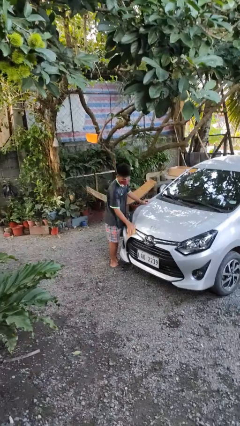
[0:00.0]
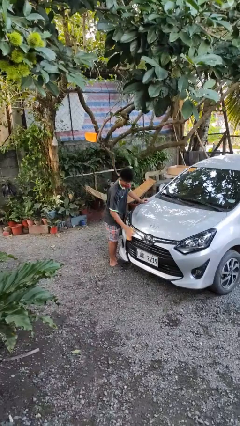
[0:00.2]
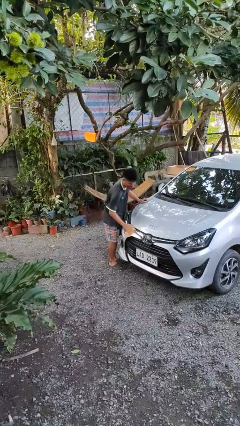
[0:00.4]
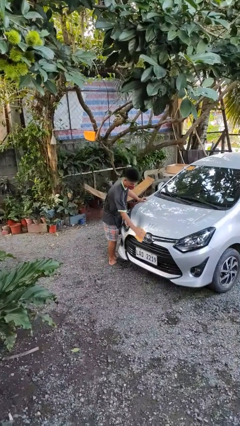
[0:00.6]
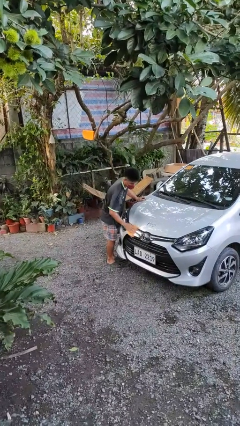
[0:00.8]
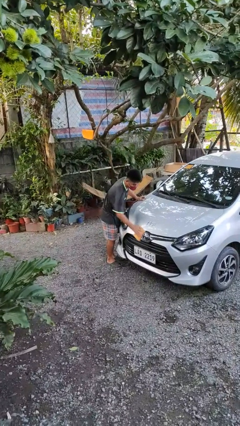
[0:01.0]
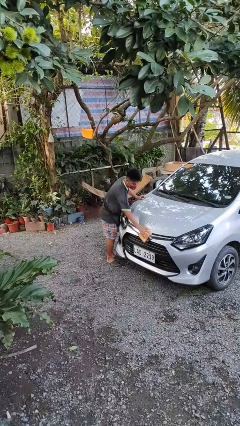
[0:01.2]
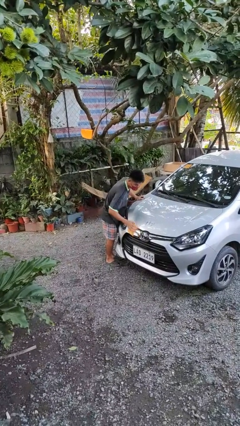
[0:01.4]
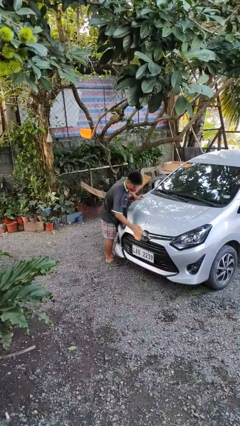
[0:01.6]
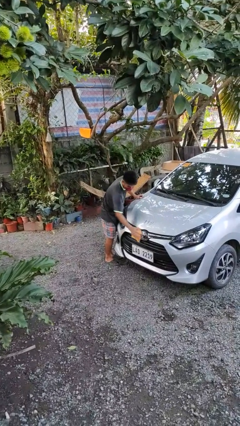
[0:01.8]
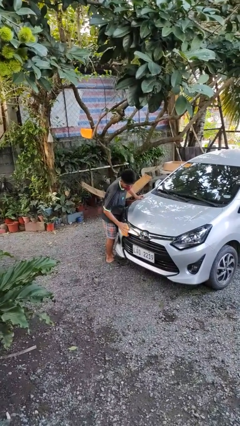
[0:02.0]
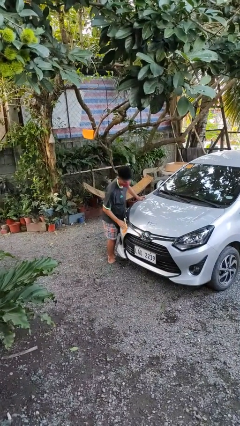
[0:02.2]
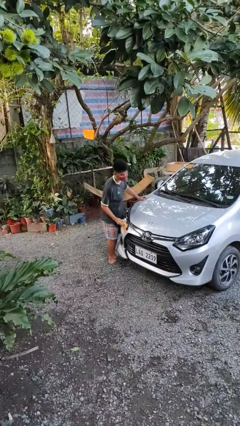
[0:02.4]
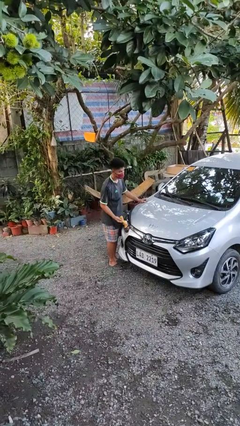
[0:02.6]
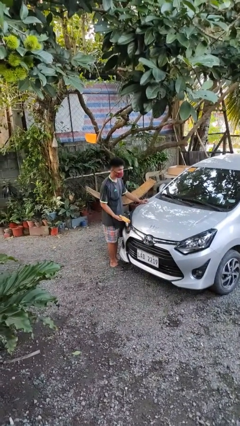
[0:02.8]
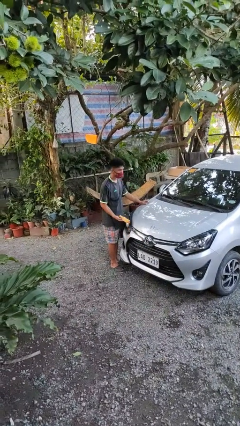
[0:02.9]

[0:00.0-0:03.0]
person polishes car with rag

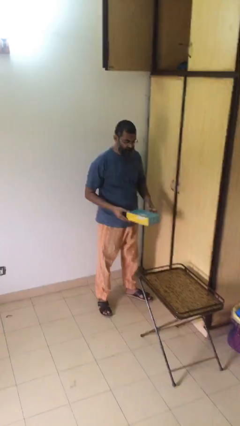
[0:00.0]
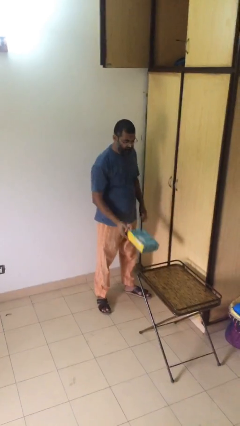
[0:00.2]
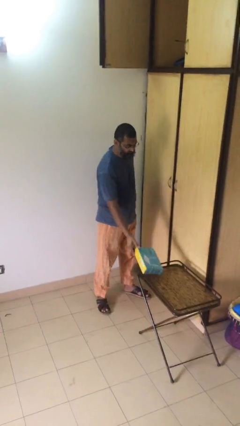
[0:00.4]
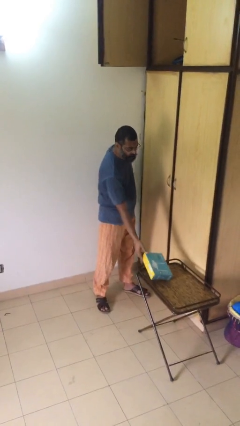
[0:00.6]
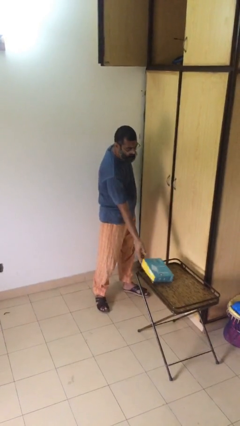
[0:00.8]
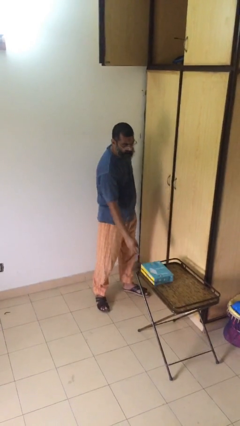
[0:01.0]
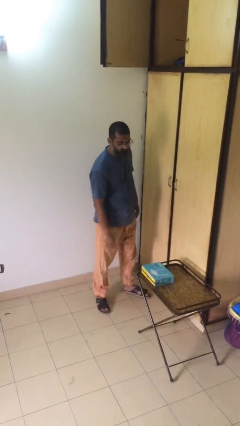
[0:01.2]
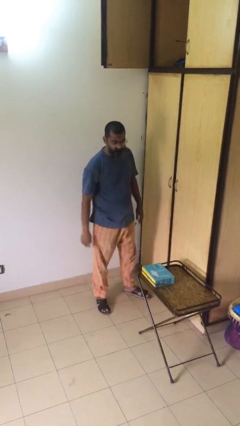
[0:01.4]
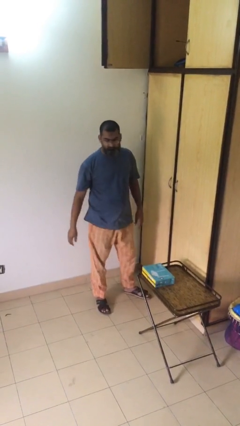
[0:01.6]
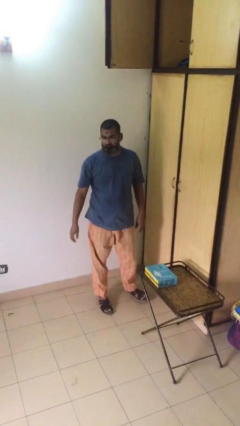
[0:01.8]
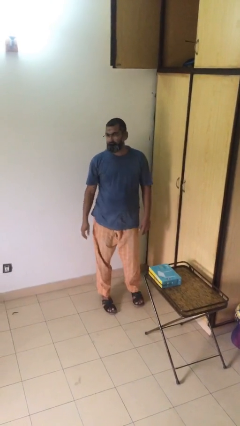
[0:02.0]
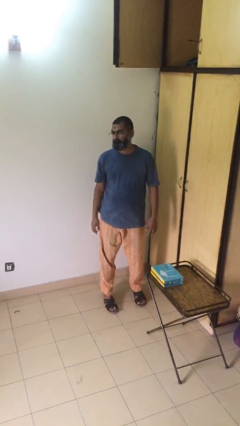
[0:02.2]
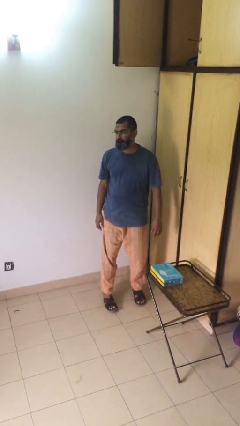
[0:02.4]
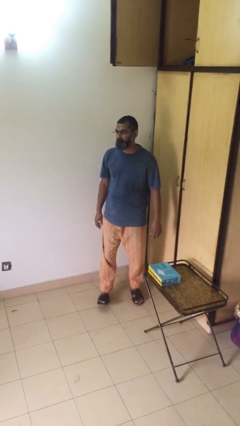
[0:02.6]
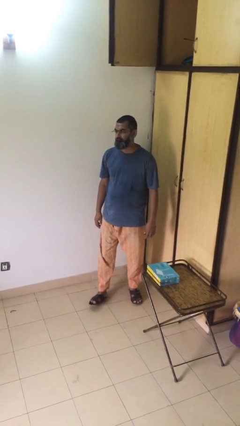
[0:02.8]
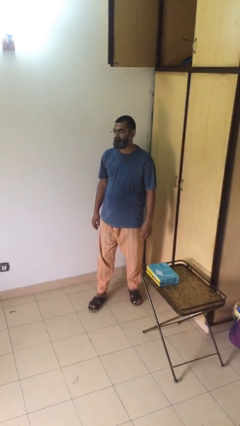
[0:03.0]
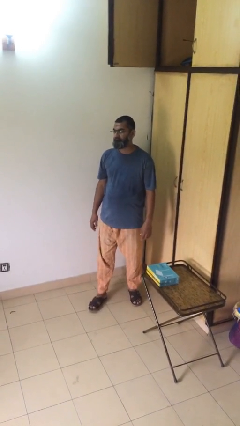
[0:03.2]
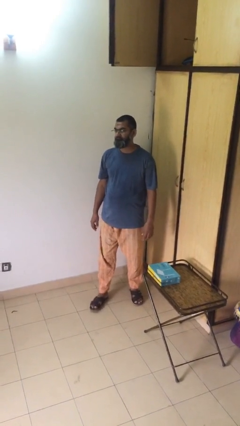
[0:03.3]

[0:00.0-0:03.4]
person puts down object on table

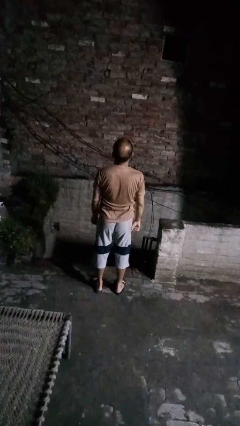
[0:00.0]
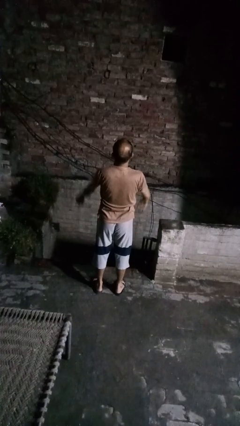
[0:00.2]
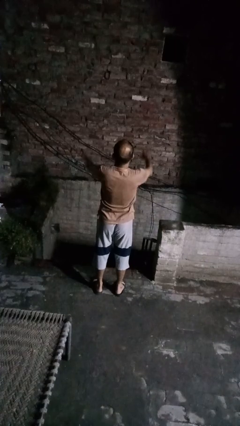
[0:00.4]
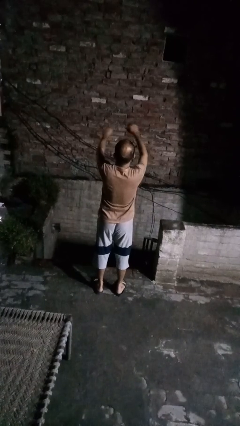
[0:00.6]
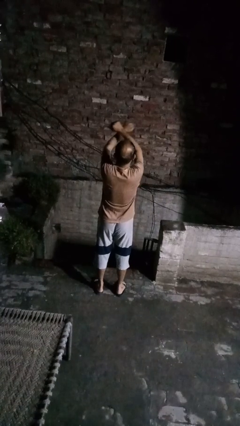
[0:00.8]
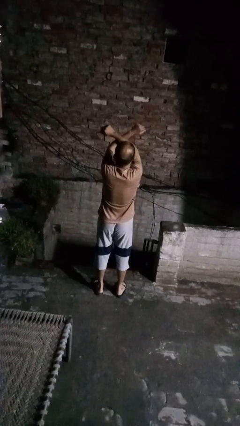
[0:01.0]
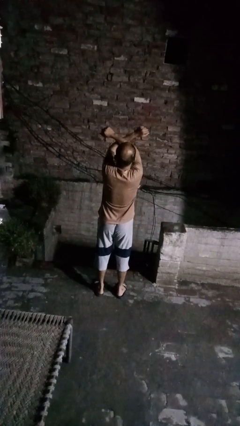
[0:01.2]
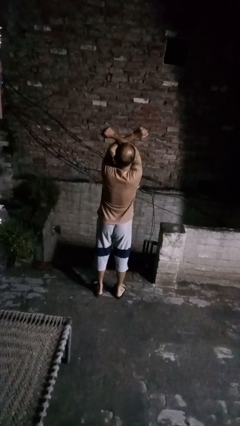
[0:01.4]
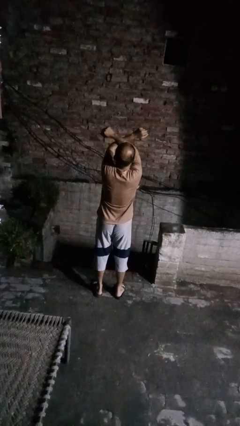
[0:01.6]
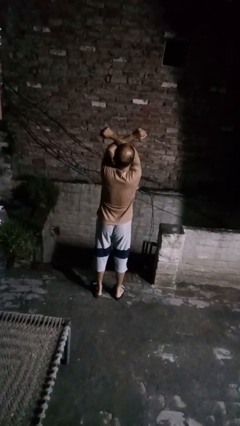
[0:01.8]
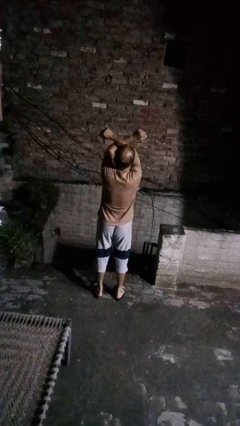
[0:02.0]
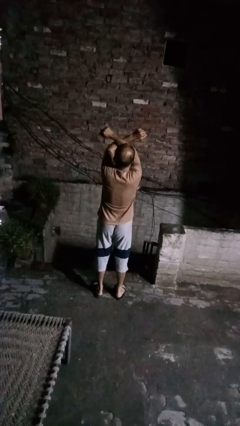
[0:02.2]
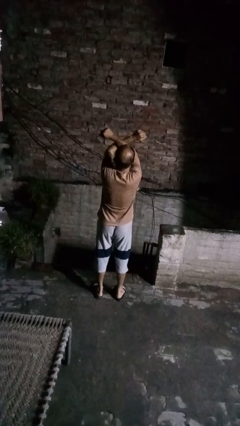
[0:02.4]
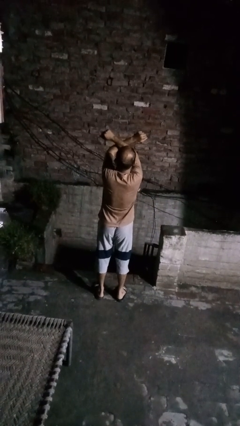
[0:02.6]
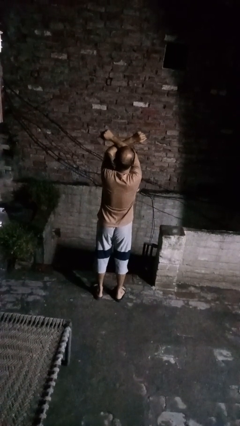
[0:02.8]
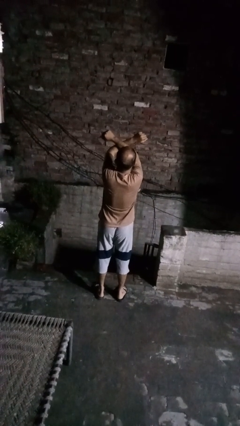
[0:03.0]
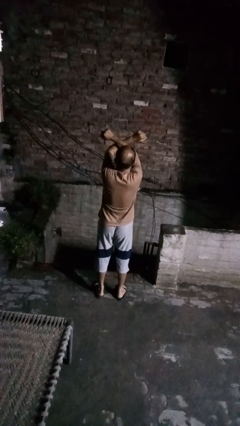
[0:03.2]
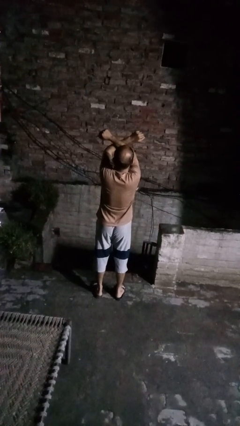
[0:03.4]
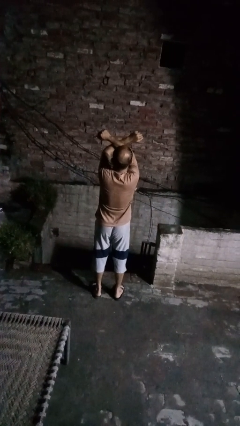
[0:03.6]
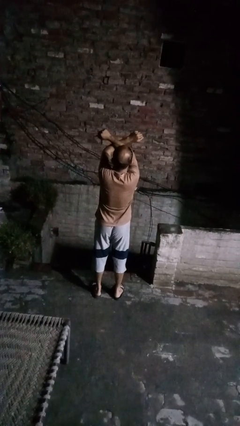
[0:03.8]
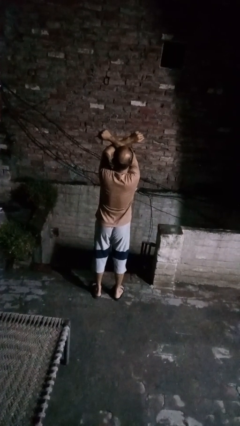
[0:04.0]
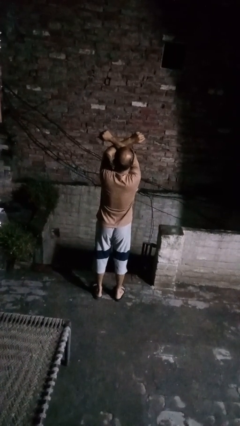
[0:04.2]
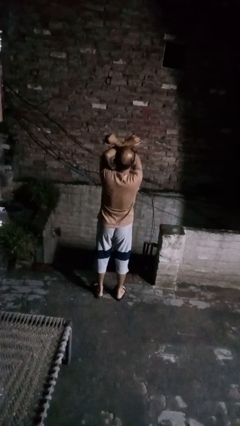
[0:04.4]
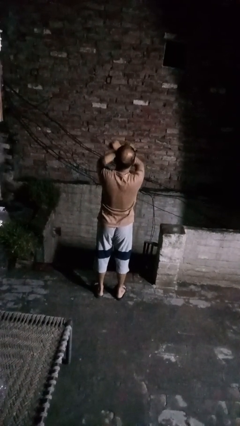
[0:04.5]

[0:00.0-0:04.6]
person gestures arms x

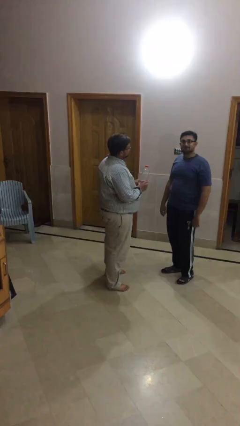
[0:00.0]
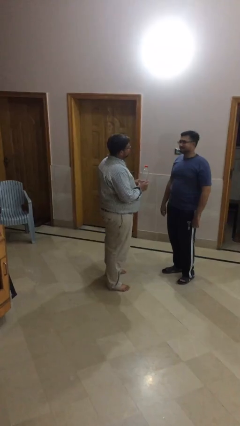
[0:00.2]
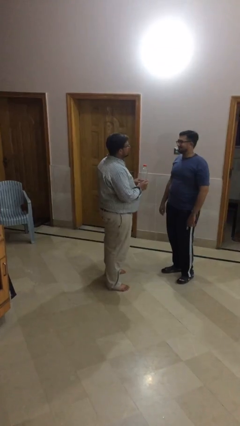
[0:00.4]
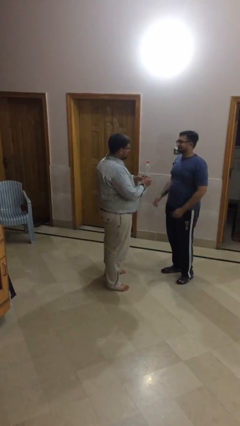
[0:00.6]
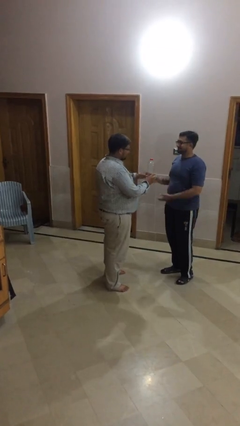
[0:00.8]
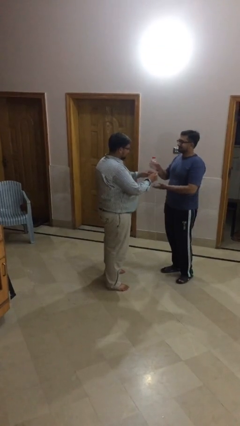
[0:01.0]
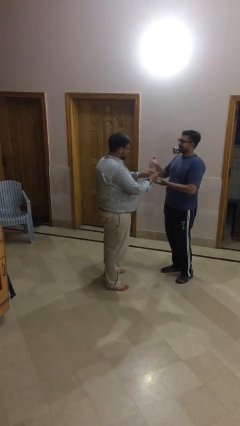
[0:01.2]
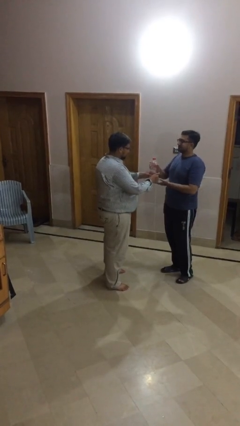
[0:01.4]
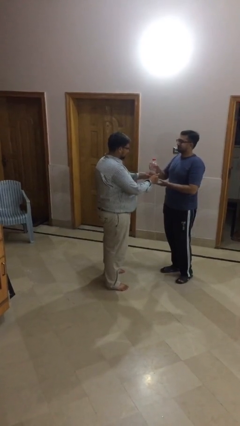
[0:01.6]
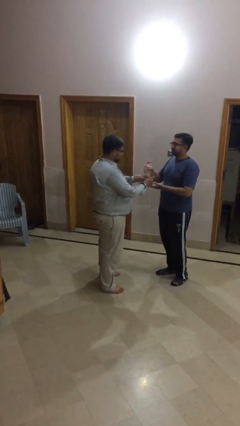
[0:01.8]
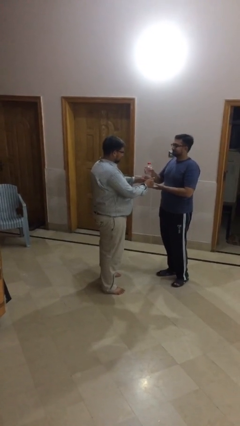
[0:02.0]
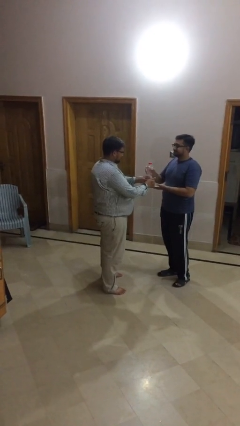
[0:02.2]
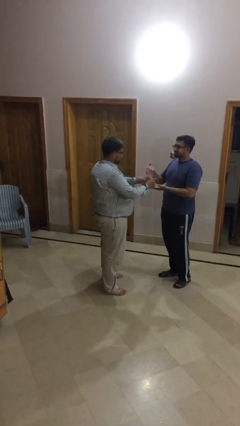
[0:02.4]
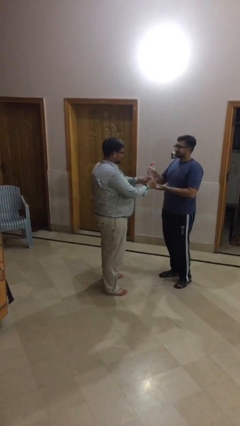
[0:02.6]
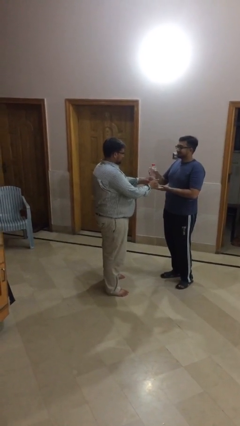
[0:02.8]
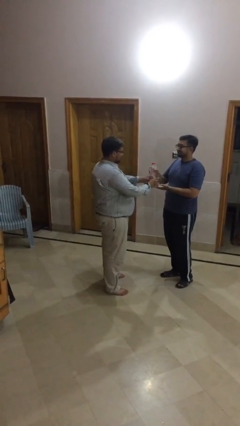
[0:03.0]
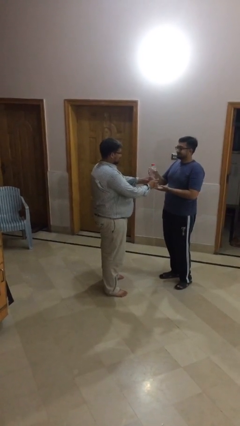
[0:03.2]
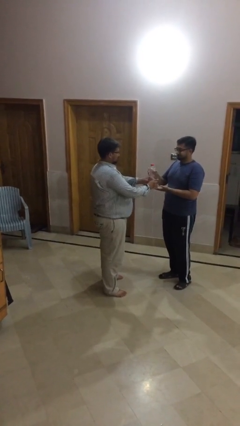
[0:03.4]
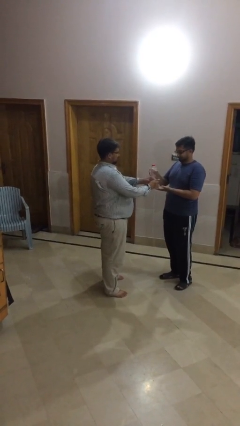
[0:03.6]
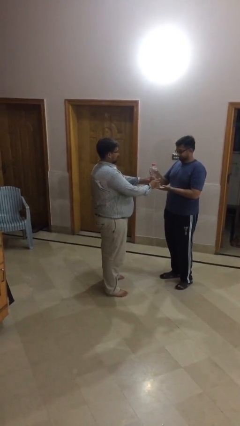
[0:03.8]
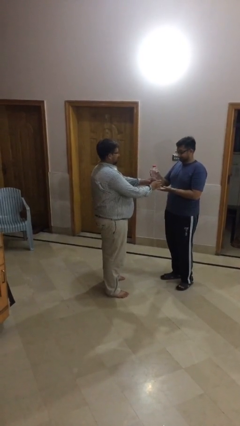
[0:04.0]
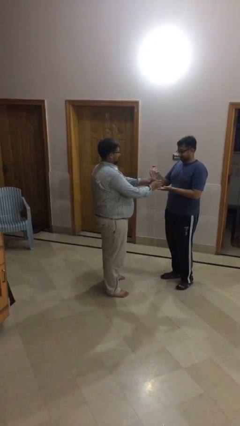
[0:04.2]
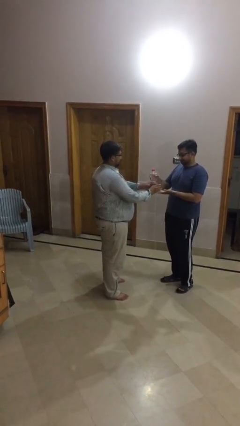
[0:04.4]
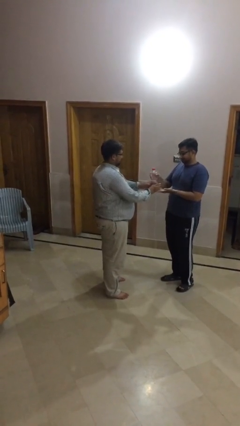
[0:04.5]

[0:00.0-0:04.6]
person transfers object to person

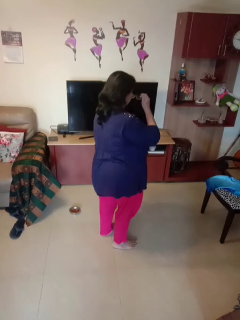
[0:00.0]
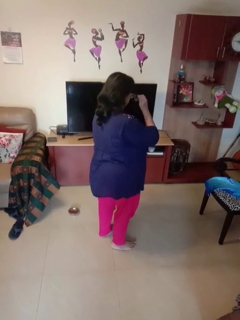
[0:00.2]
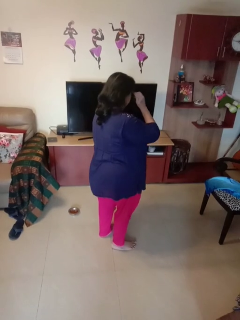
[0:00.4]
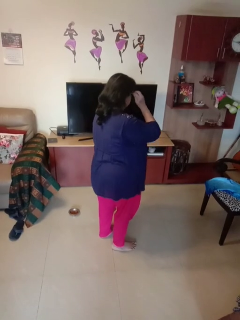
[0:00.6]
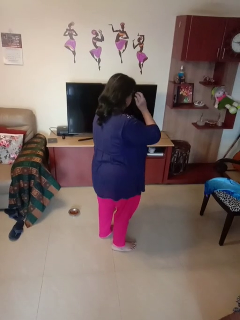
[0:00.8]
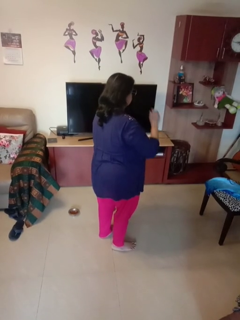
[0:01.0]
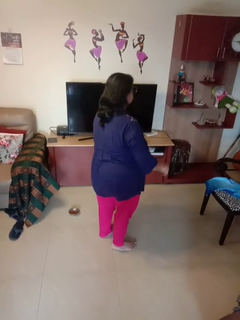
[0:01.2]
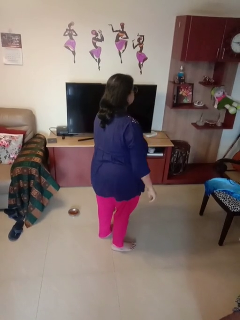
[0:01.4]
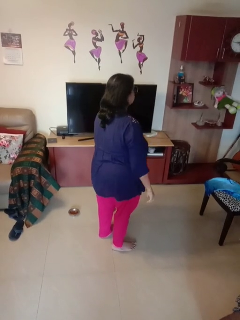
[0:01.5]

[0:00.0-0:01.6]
person puts on sunglasses

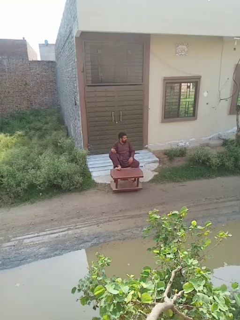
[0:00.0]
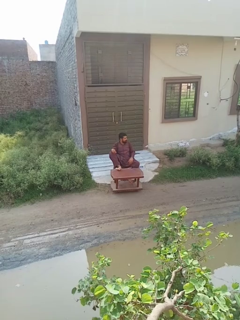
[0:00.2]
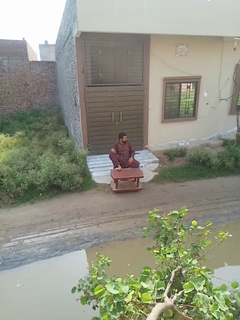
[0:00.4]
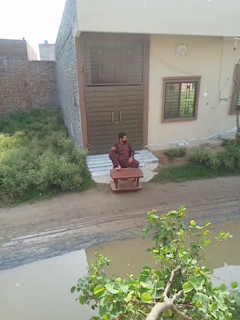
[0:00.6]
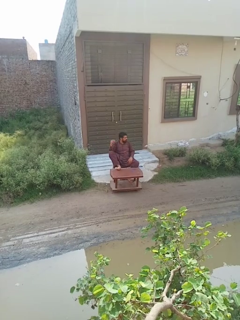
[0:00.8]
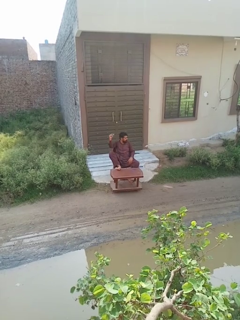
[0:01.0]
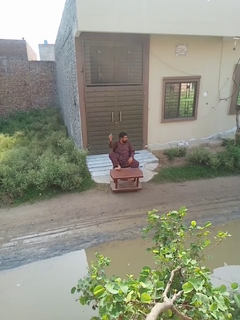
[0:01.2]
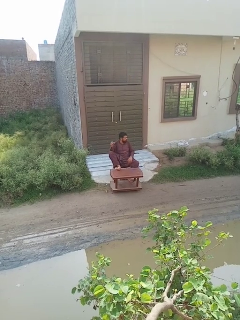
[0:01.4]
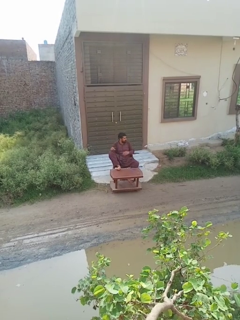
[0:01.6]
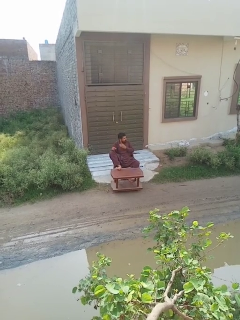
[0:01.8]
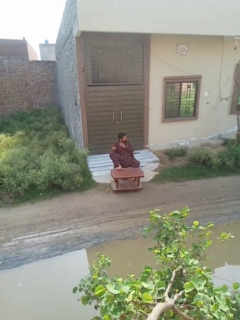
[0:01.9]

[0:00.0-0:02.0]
person snaps fingers
